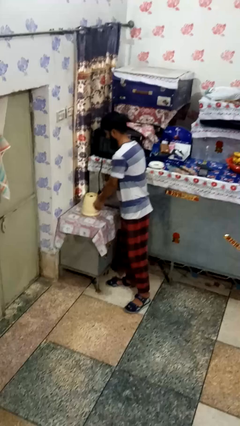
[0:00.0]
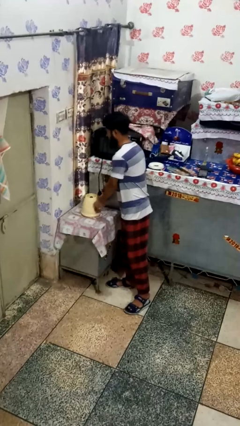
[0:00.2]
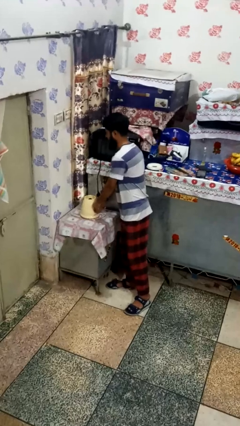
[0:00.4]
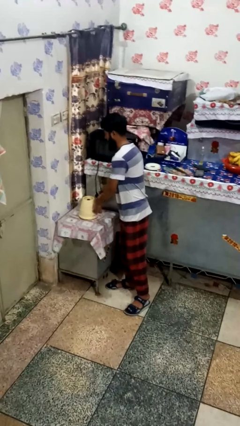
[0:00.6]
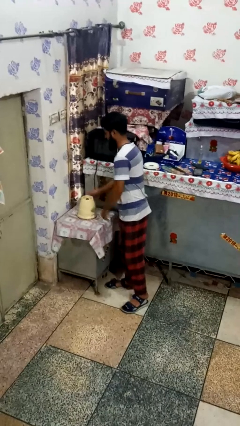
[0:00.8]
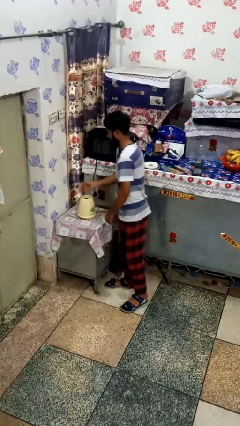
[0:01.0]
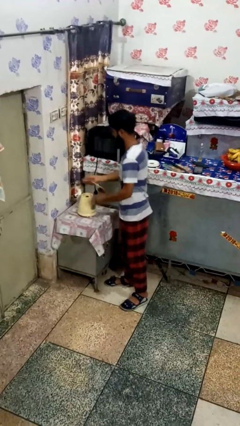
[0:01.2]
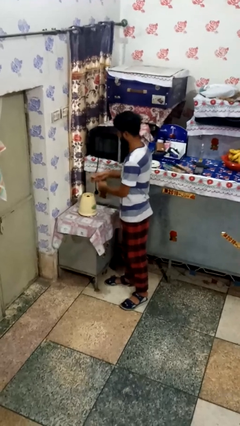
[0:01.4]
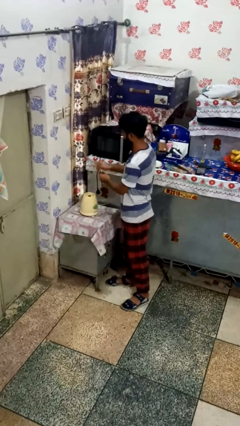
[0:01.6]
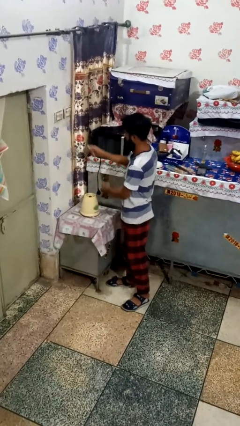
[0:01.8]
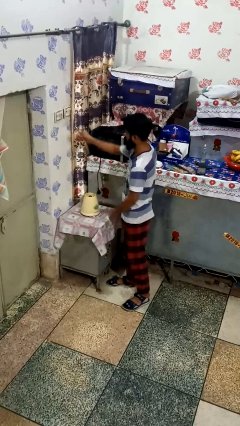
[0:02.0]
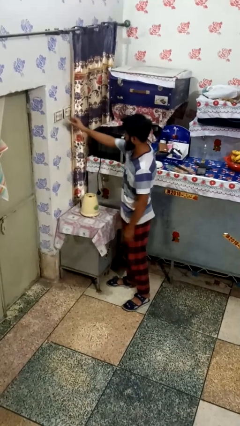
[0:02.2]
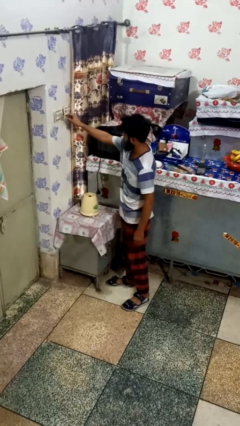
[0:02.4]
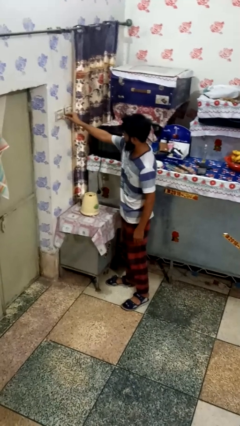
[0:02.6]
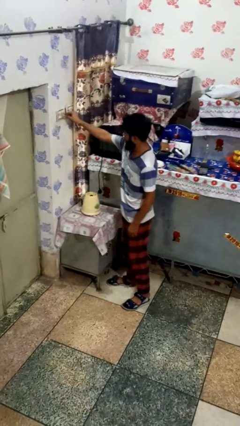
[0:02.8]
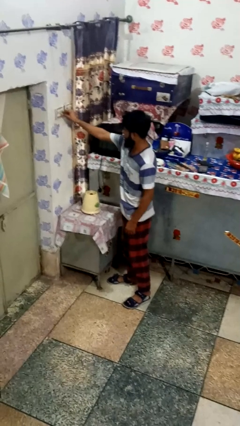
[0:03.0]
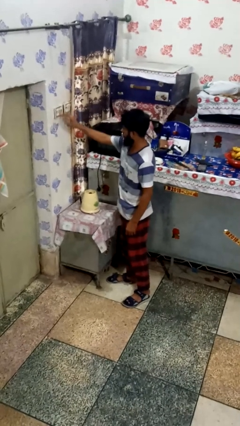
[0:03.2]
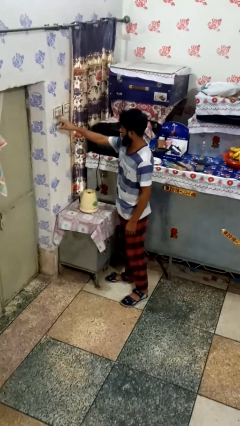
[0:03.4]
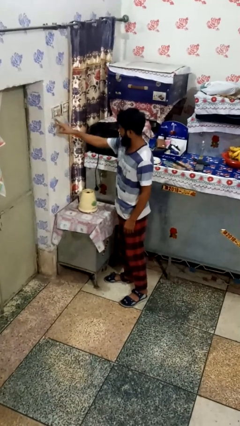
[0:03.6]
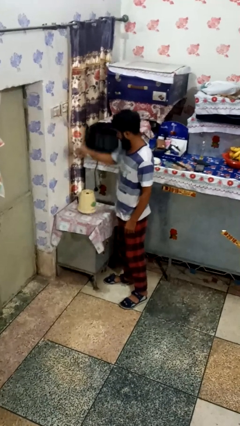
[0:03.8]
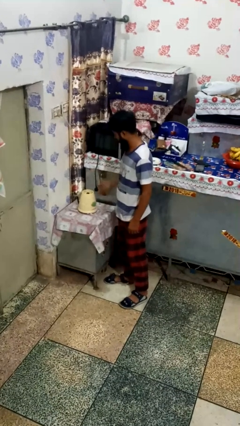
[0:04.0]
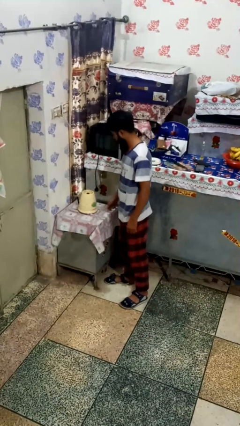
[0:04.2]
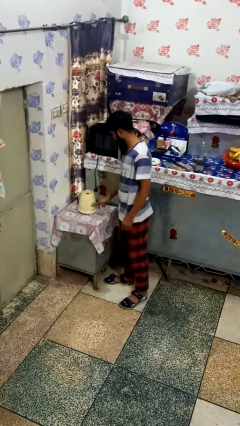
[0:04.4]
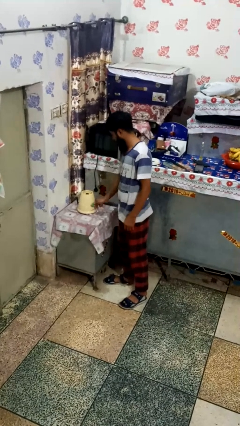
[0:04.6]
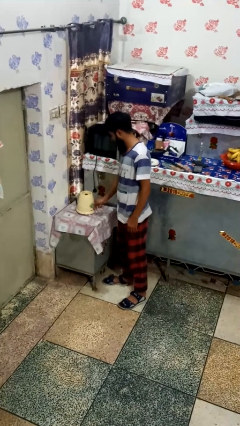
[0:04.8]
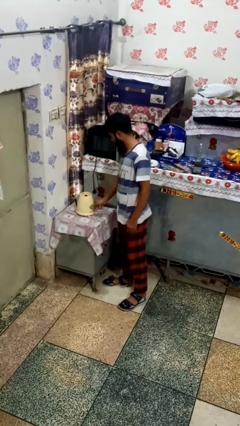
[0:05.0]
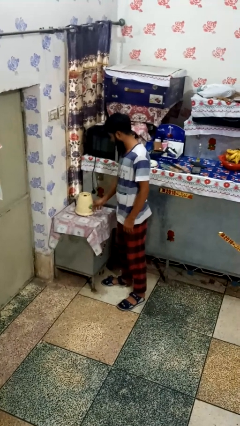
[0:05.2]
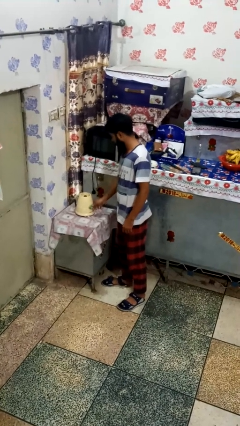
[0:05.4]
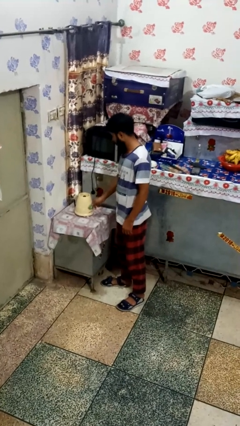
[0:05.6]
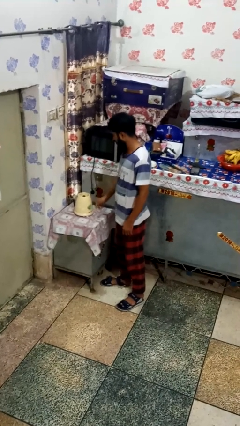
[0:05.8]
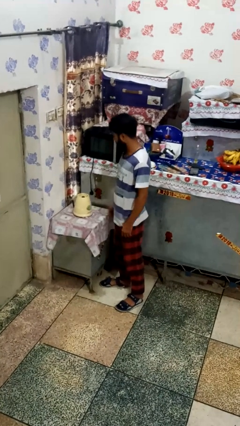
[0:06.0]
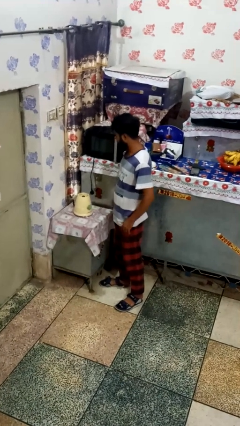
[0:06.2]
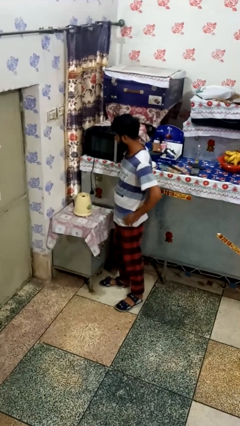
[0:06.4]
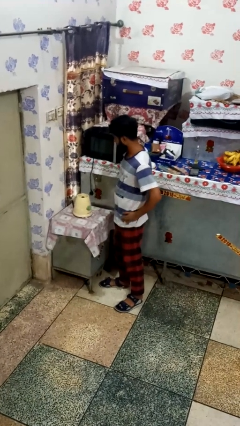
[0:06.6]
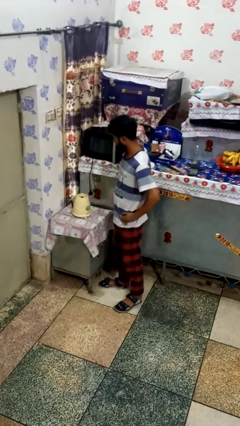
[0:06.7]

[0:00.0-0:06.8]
person plugs into electrical socket

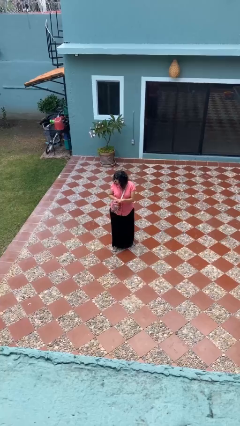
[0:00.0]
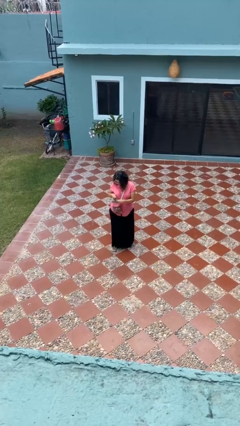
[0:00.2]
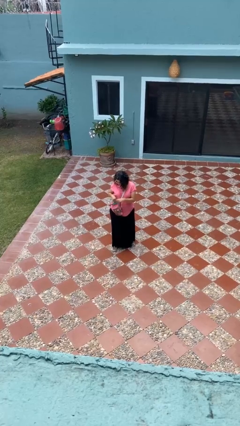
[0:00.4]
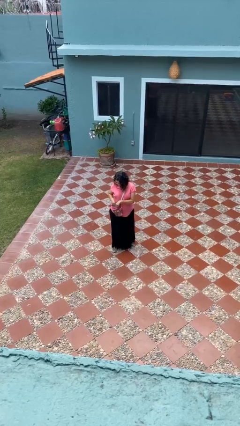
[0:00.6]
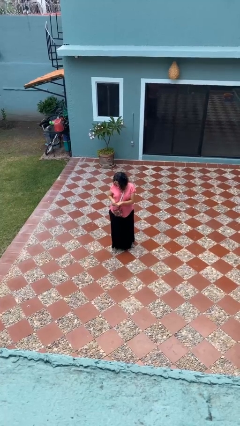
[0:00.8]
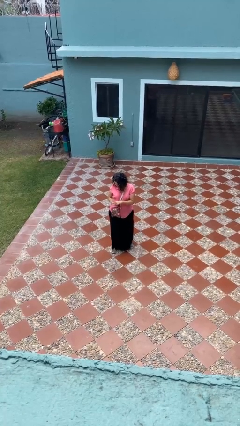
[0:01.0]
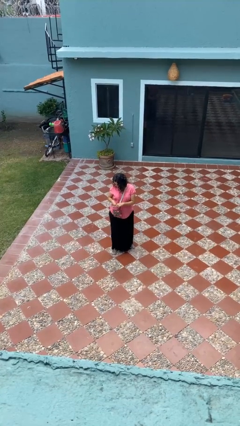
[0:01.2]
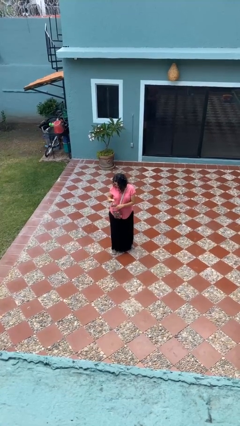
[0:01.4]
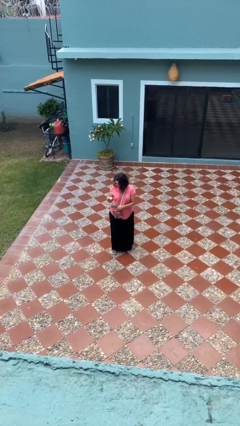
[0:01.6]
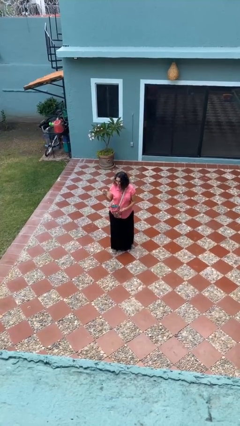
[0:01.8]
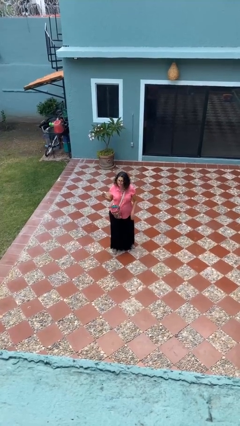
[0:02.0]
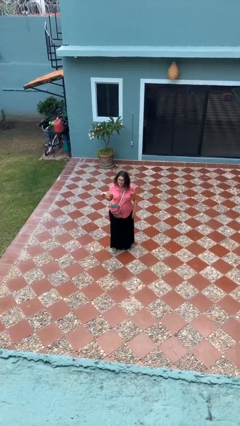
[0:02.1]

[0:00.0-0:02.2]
person takes object from purse

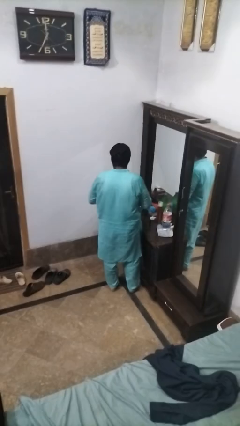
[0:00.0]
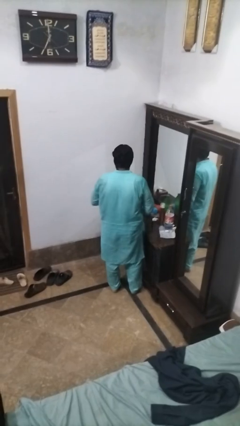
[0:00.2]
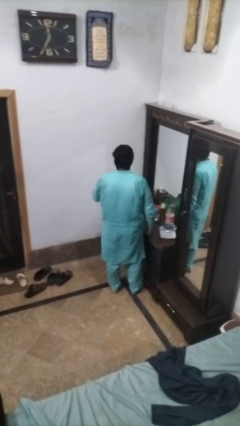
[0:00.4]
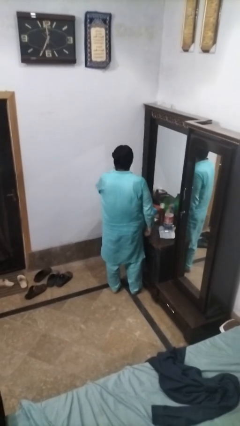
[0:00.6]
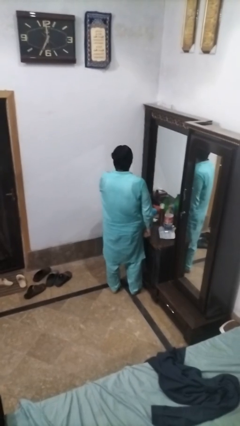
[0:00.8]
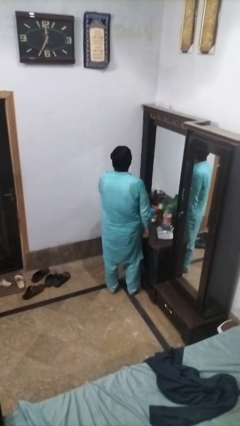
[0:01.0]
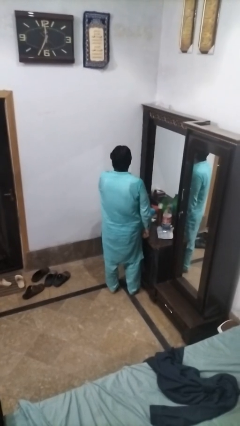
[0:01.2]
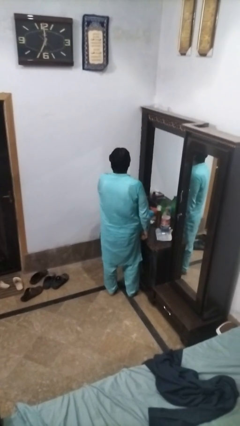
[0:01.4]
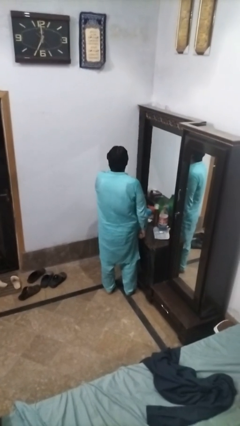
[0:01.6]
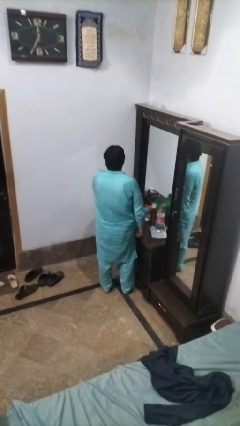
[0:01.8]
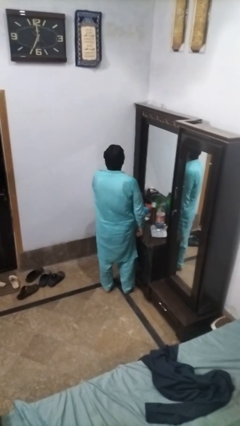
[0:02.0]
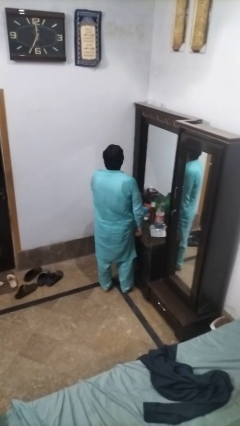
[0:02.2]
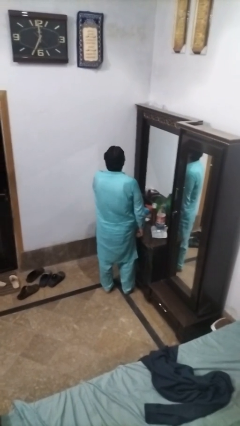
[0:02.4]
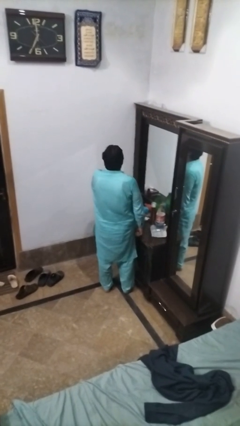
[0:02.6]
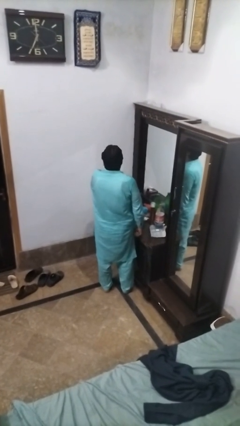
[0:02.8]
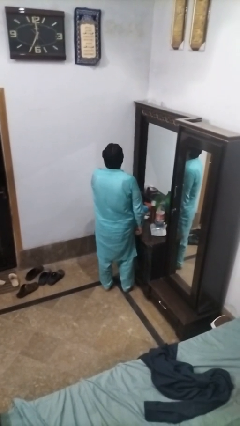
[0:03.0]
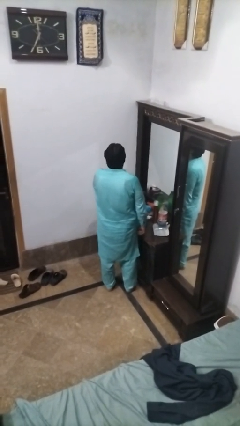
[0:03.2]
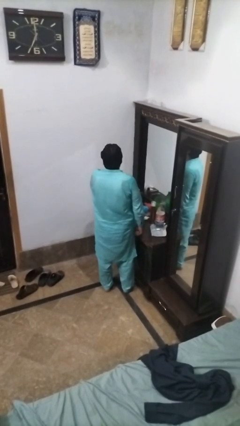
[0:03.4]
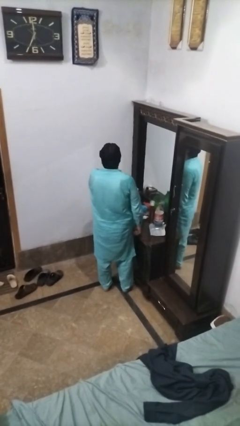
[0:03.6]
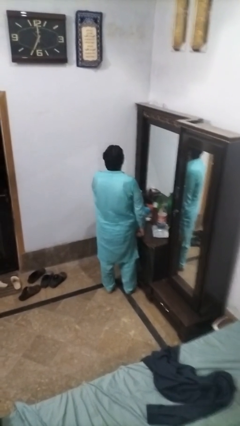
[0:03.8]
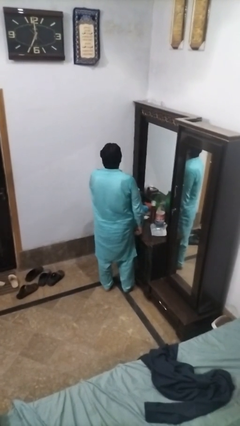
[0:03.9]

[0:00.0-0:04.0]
person applies lip makeup

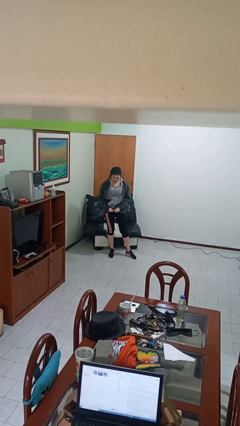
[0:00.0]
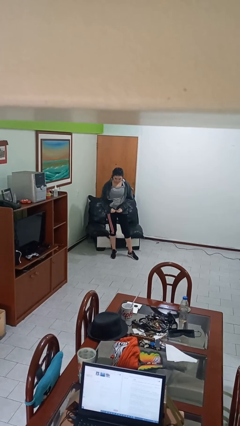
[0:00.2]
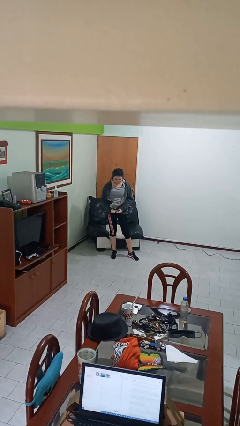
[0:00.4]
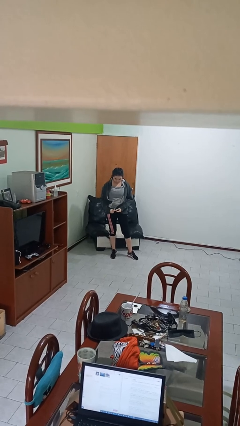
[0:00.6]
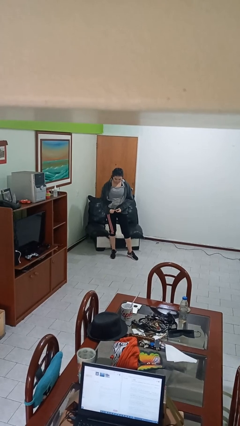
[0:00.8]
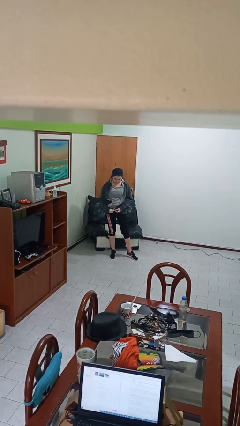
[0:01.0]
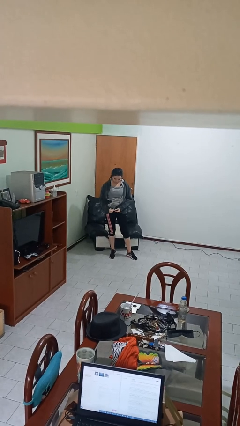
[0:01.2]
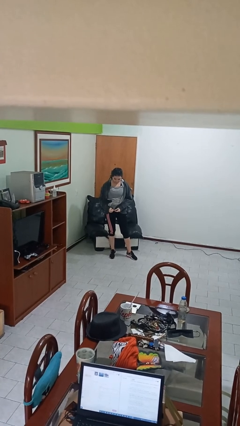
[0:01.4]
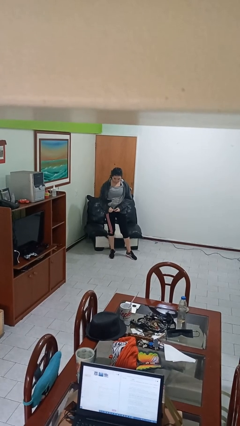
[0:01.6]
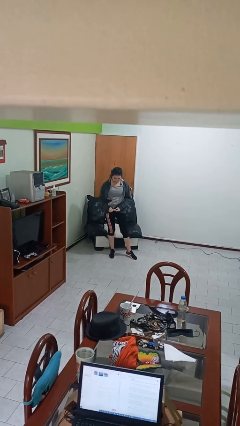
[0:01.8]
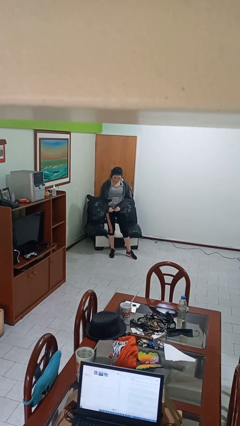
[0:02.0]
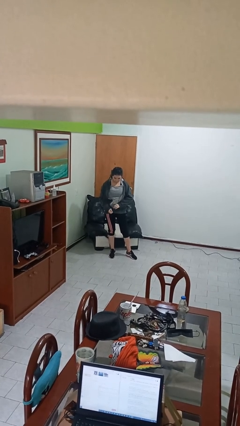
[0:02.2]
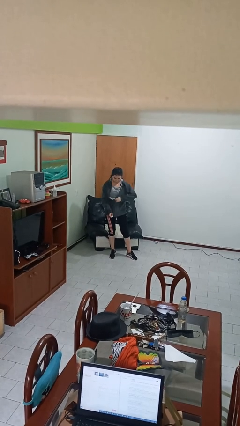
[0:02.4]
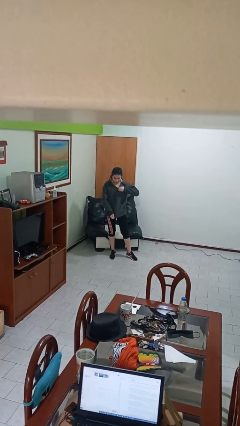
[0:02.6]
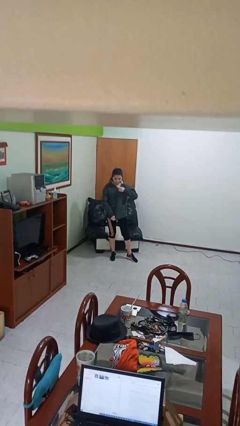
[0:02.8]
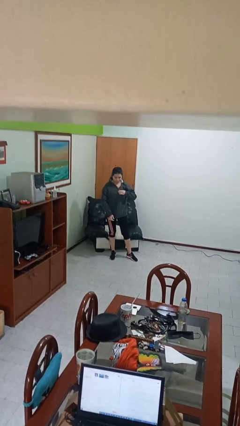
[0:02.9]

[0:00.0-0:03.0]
person zips up jacket

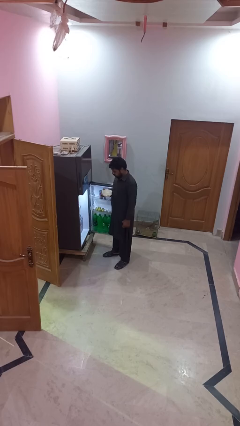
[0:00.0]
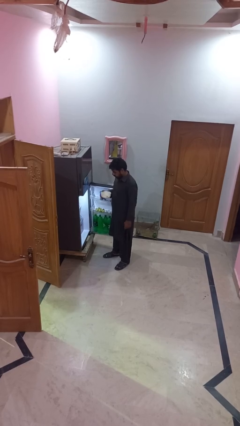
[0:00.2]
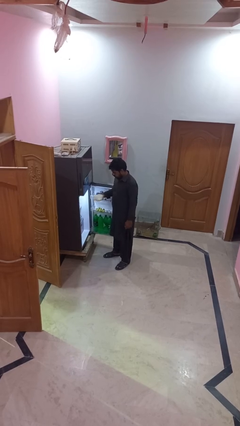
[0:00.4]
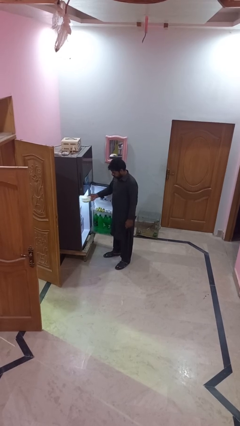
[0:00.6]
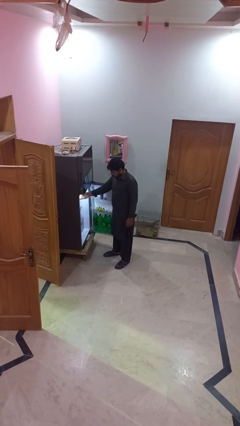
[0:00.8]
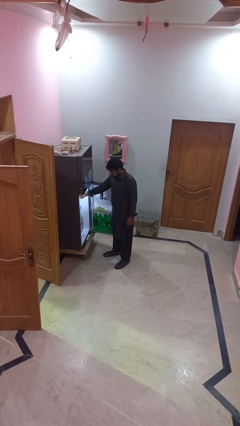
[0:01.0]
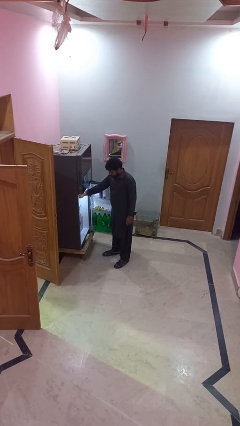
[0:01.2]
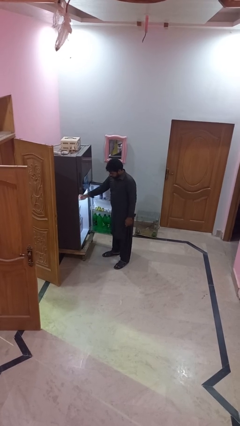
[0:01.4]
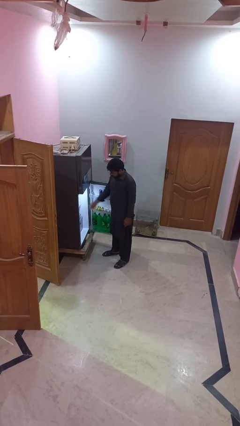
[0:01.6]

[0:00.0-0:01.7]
person puts object into refrigerator

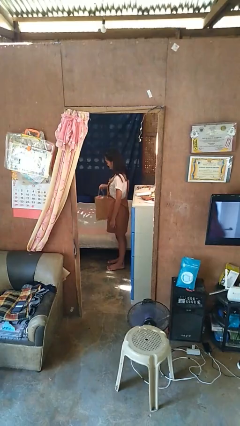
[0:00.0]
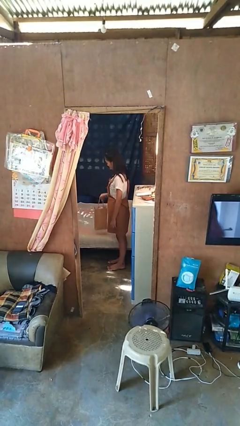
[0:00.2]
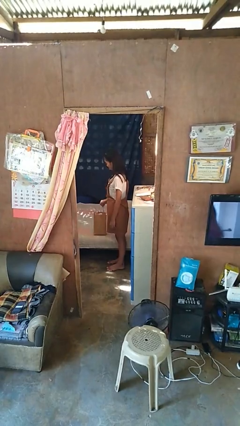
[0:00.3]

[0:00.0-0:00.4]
person puts down object on couch
